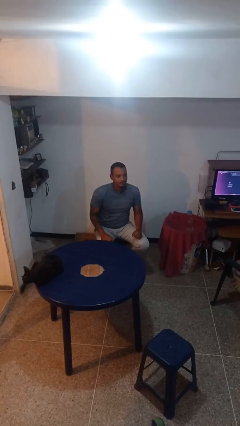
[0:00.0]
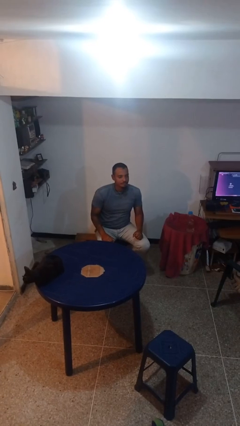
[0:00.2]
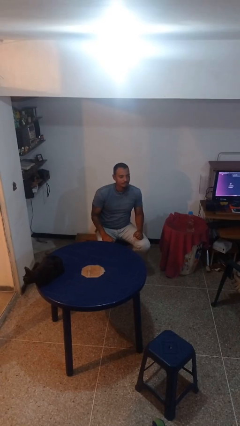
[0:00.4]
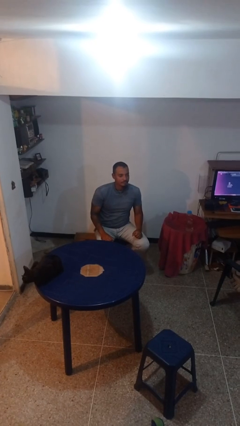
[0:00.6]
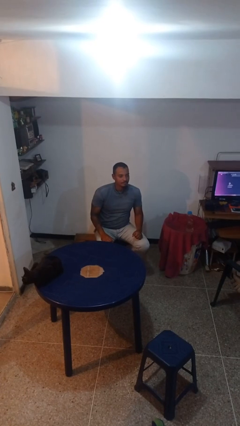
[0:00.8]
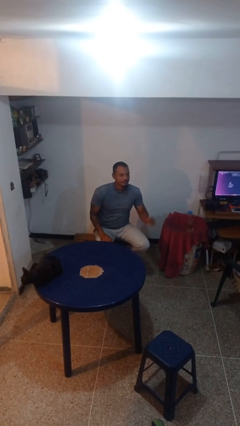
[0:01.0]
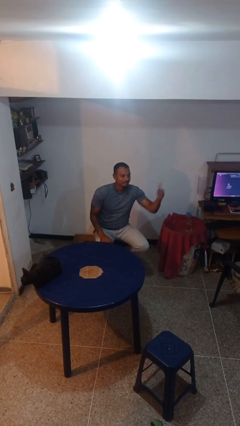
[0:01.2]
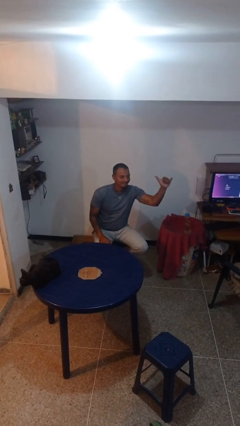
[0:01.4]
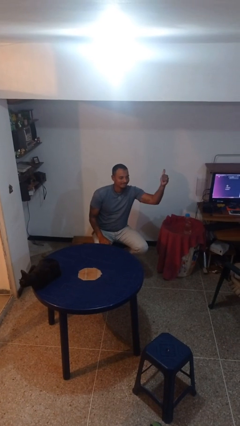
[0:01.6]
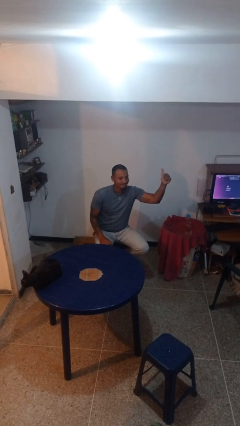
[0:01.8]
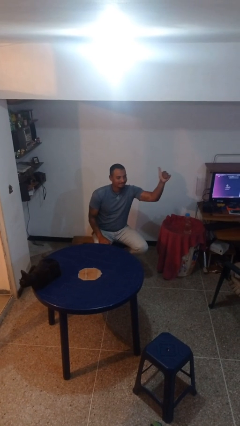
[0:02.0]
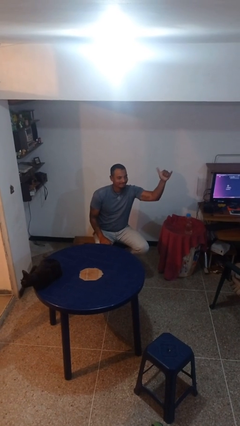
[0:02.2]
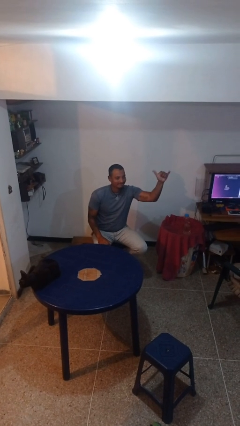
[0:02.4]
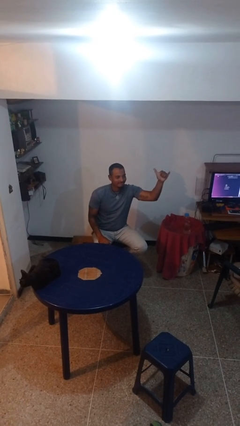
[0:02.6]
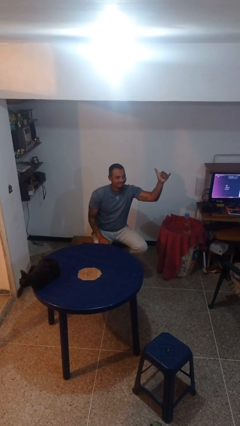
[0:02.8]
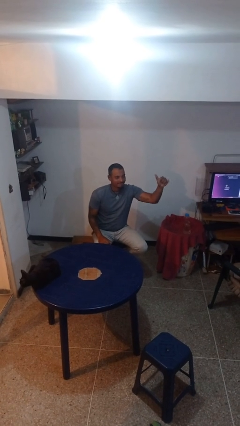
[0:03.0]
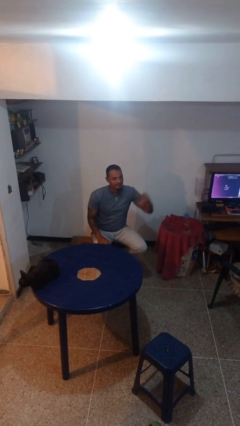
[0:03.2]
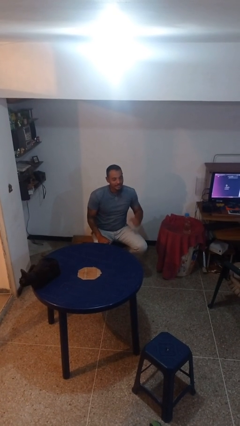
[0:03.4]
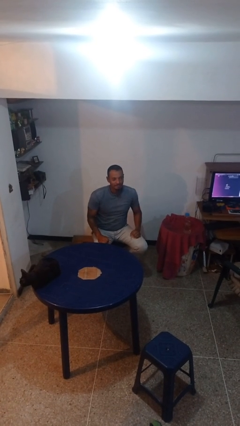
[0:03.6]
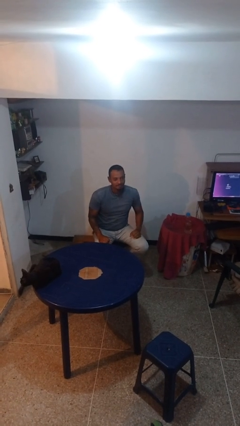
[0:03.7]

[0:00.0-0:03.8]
person gestures hang loose

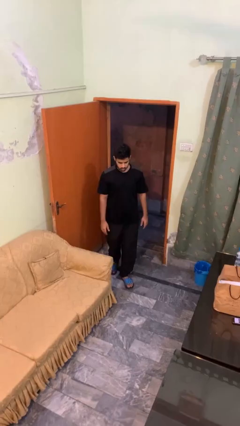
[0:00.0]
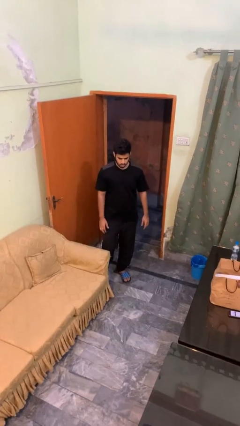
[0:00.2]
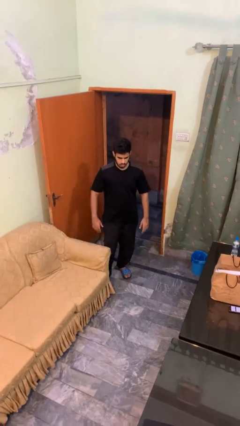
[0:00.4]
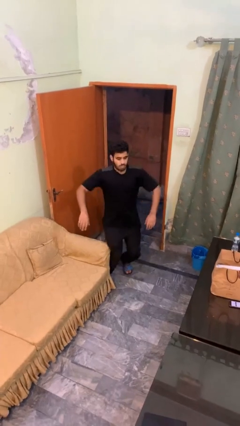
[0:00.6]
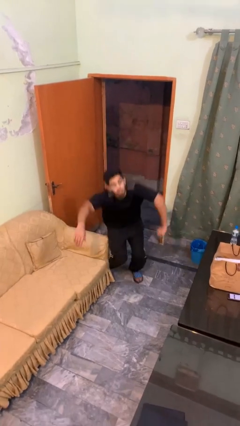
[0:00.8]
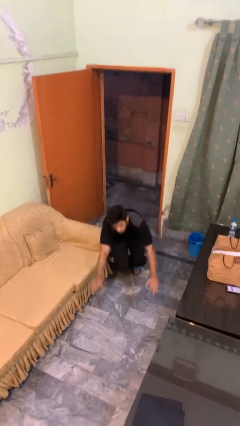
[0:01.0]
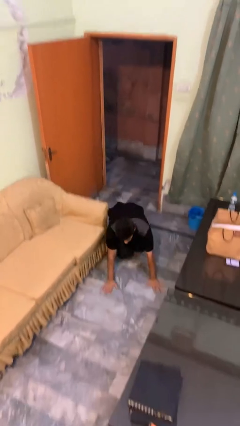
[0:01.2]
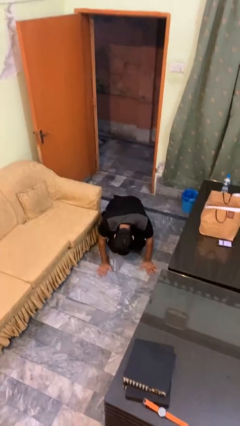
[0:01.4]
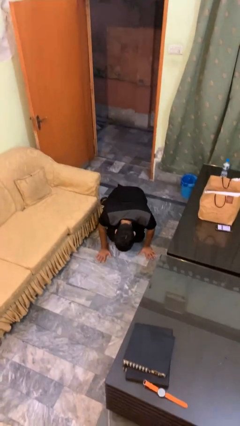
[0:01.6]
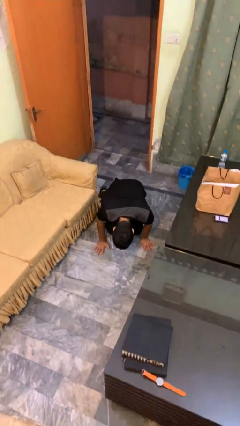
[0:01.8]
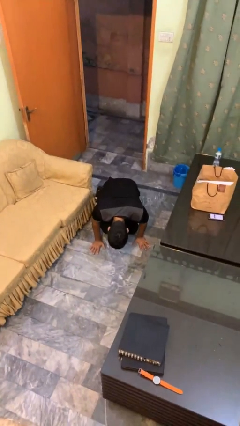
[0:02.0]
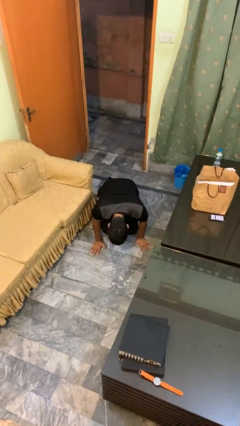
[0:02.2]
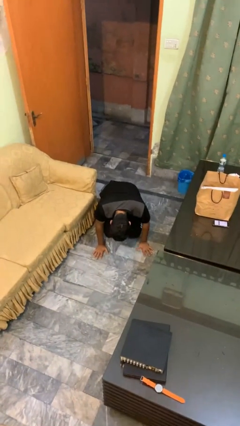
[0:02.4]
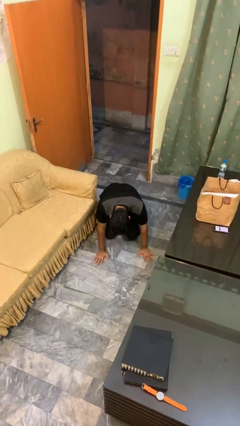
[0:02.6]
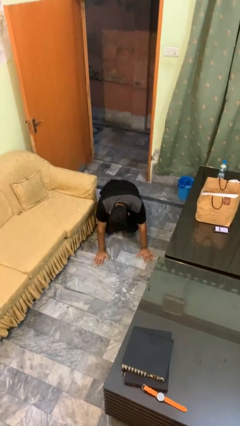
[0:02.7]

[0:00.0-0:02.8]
person trips on object on floor

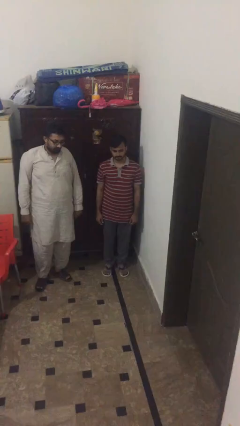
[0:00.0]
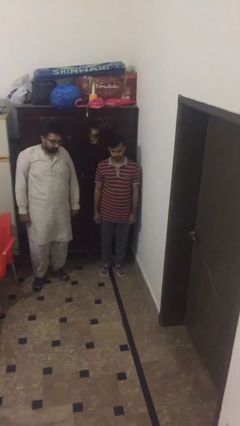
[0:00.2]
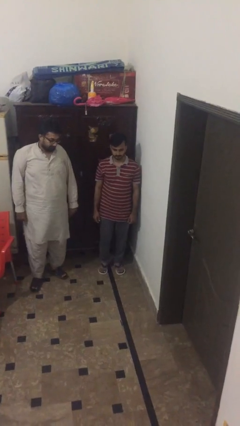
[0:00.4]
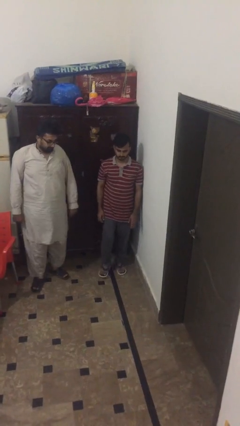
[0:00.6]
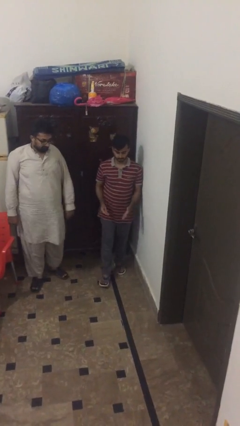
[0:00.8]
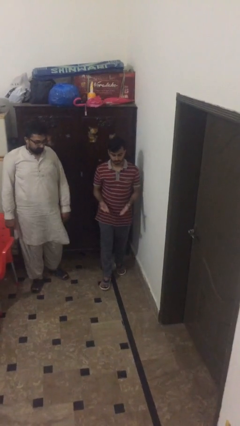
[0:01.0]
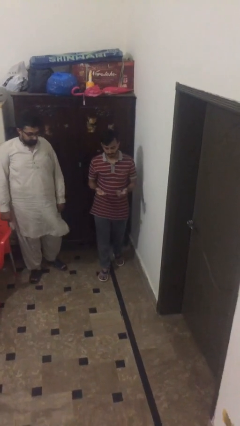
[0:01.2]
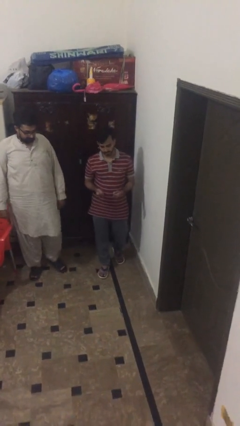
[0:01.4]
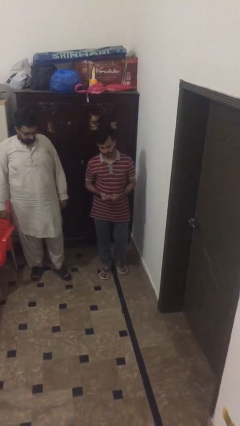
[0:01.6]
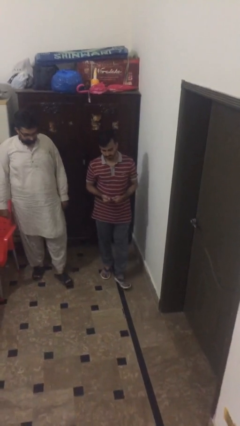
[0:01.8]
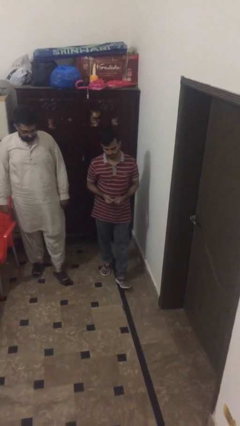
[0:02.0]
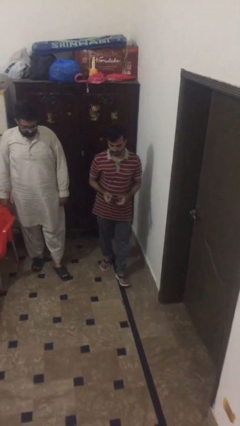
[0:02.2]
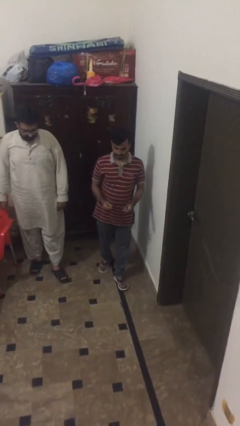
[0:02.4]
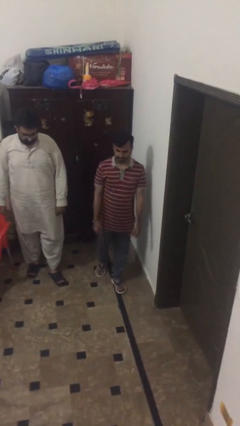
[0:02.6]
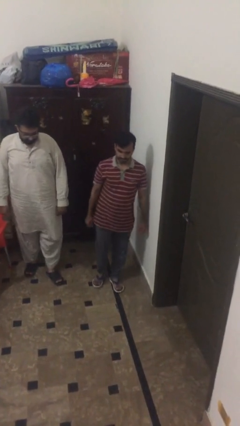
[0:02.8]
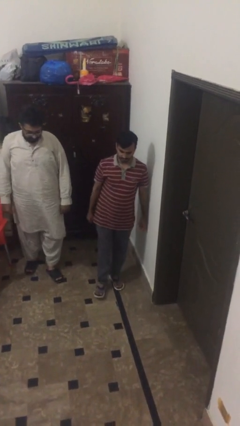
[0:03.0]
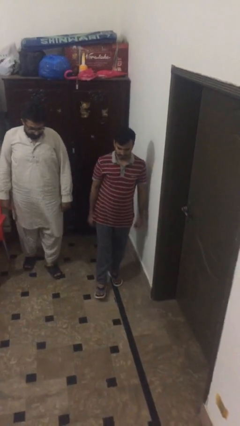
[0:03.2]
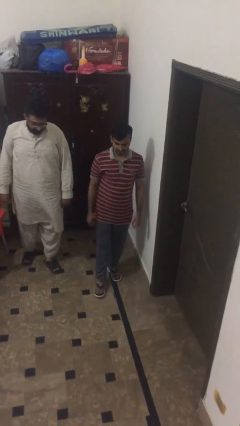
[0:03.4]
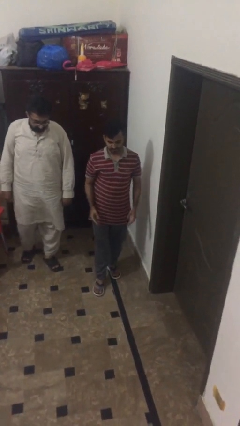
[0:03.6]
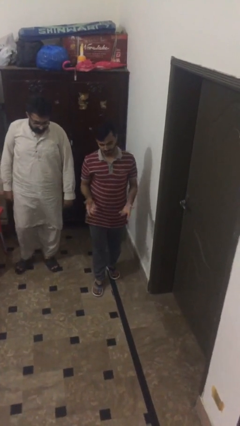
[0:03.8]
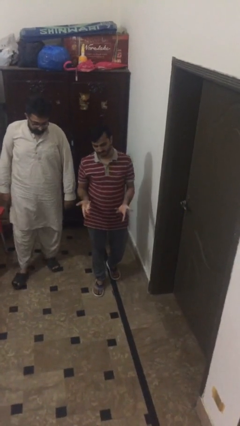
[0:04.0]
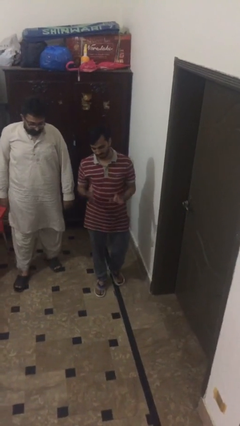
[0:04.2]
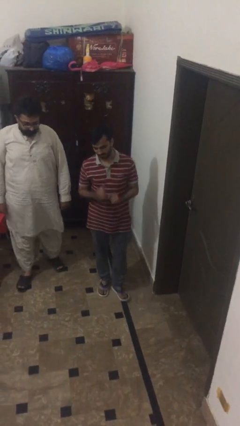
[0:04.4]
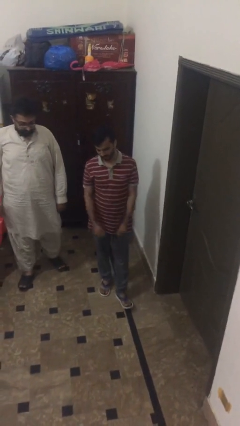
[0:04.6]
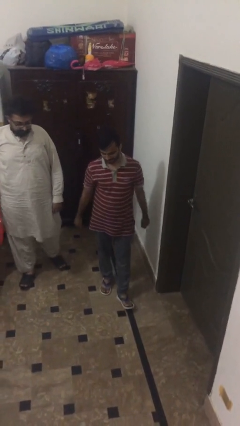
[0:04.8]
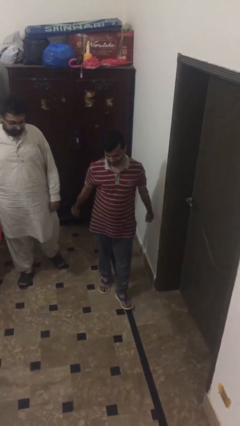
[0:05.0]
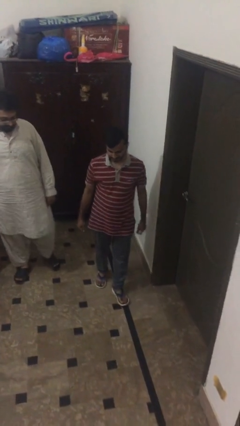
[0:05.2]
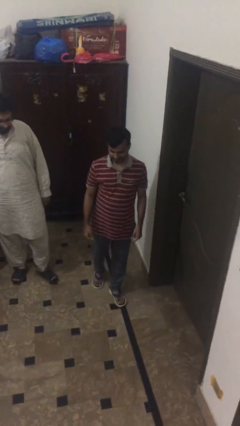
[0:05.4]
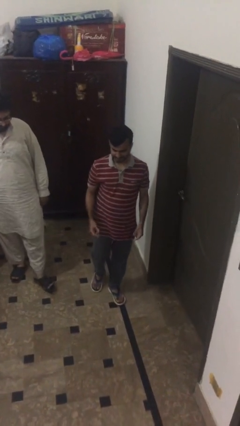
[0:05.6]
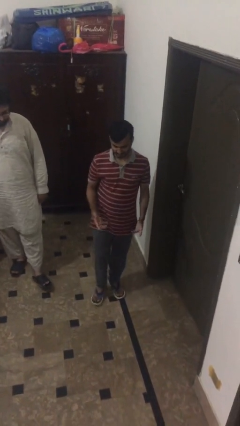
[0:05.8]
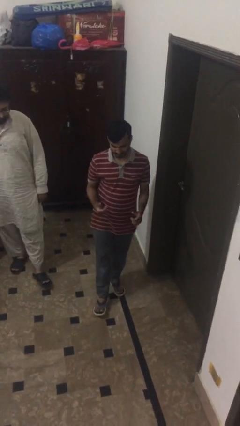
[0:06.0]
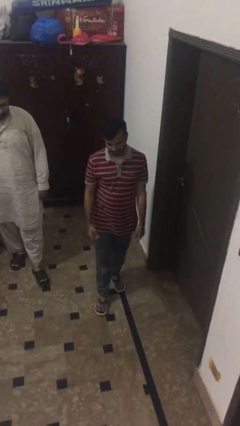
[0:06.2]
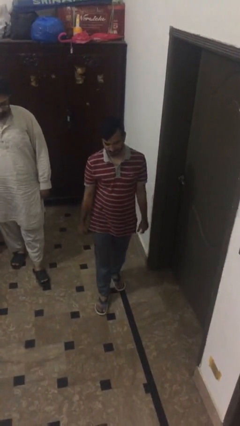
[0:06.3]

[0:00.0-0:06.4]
person talks to person

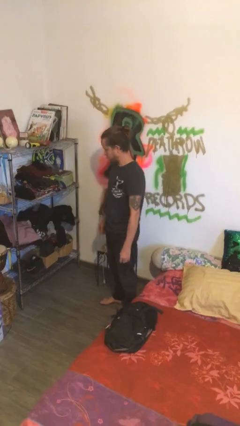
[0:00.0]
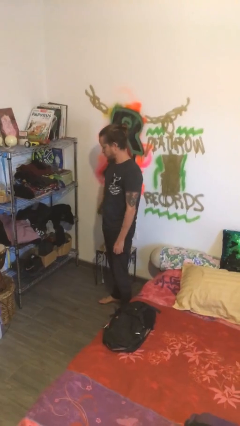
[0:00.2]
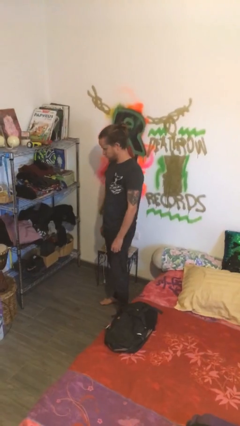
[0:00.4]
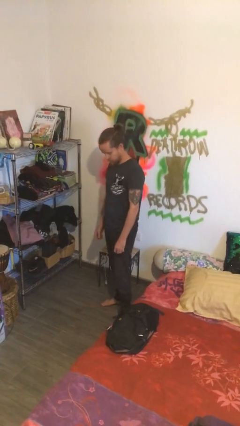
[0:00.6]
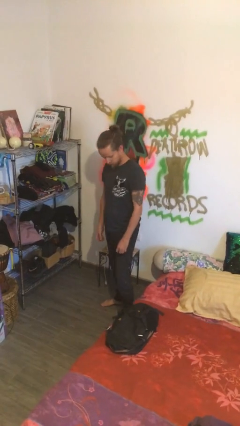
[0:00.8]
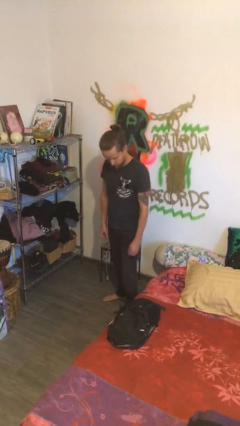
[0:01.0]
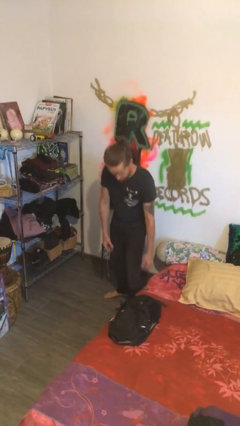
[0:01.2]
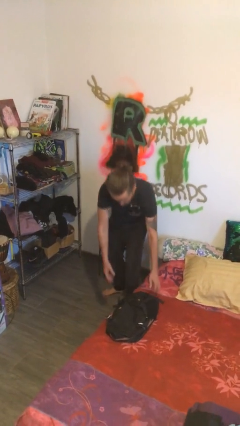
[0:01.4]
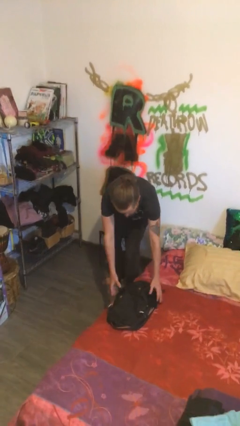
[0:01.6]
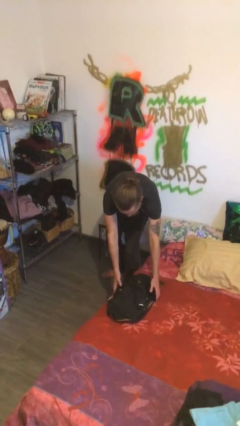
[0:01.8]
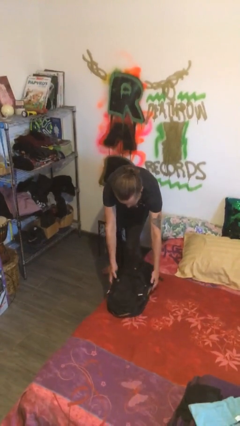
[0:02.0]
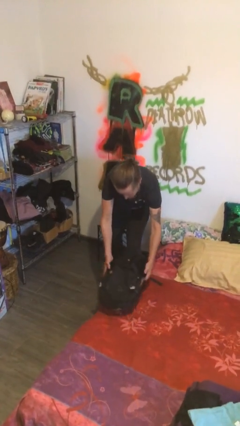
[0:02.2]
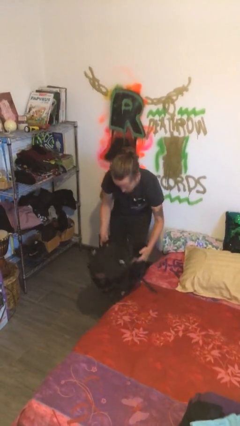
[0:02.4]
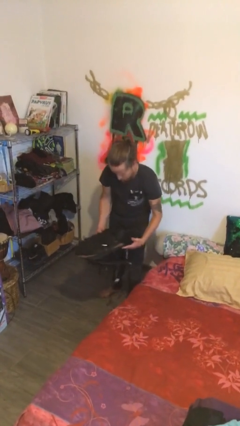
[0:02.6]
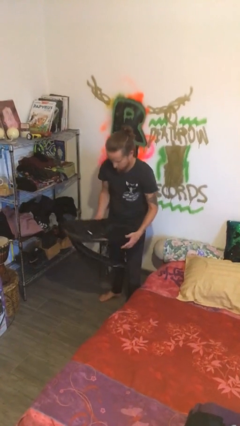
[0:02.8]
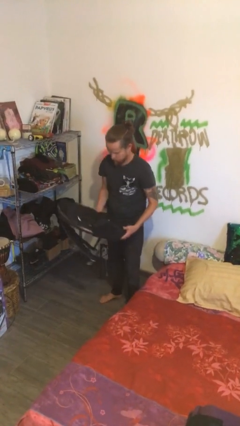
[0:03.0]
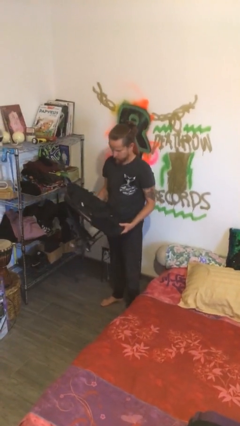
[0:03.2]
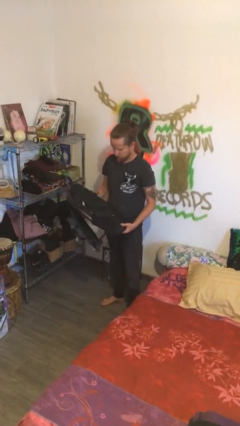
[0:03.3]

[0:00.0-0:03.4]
person picks up object from bed

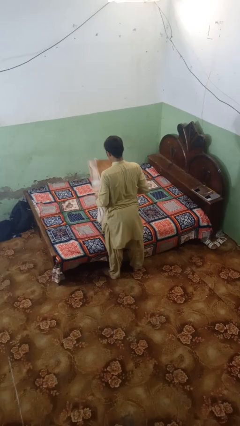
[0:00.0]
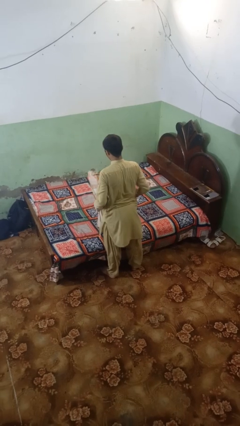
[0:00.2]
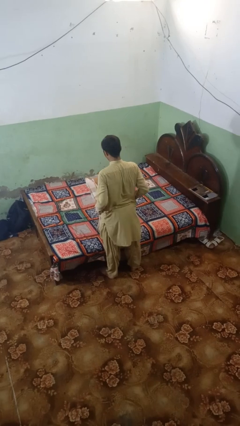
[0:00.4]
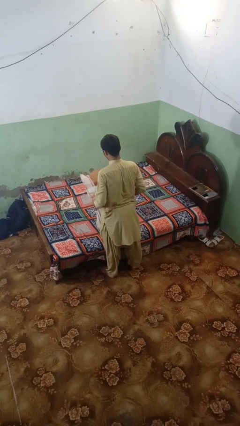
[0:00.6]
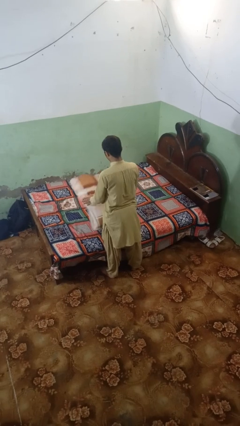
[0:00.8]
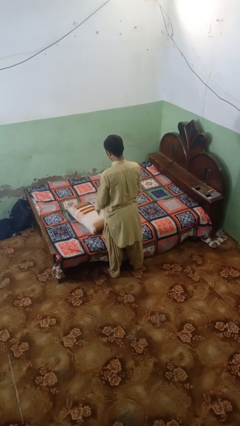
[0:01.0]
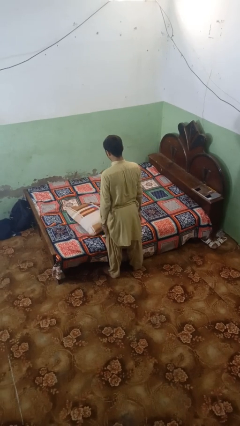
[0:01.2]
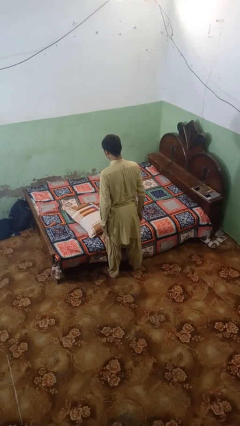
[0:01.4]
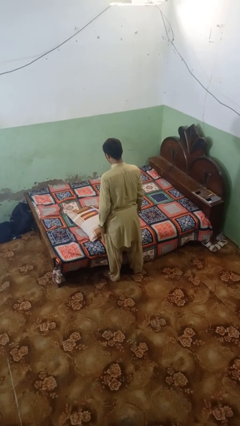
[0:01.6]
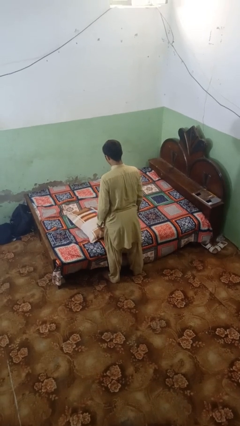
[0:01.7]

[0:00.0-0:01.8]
person throws object on bed
